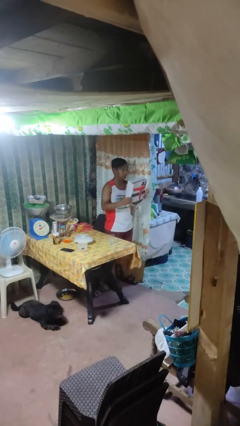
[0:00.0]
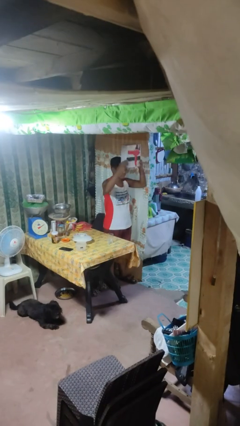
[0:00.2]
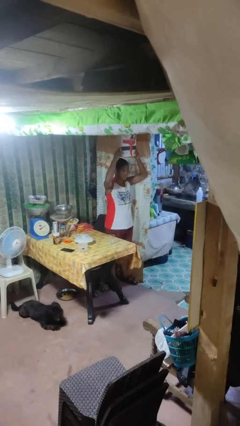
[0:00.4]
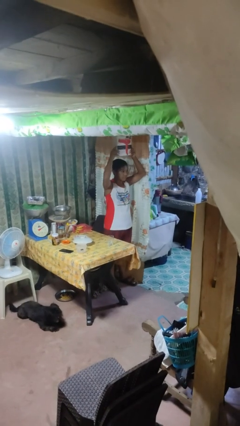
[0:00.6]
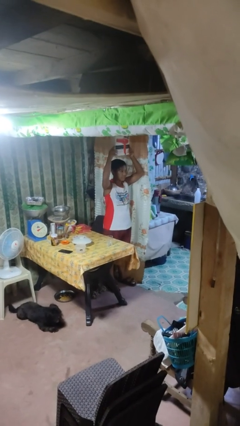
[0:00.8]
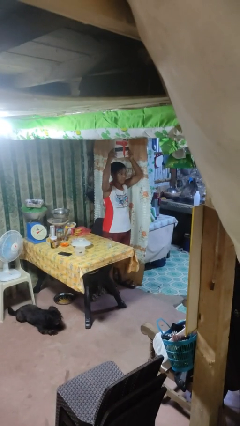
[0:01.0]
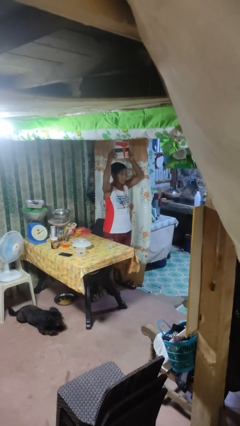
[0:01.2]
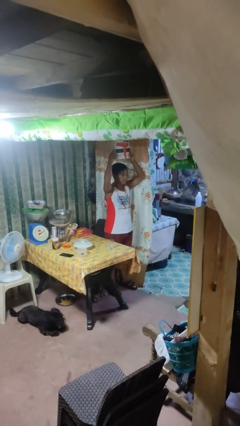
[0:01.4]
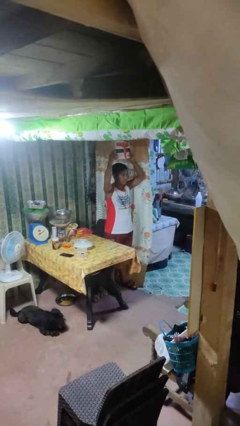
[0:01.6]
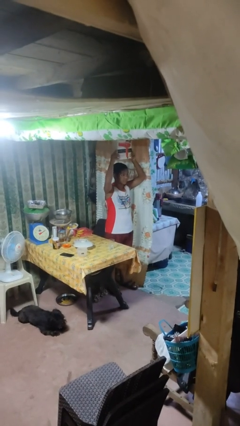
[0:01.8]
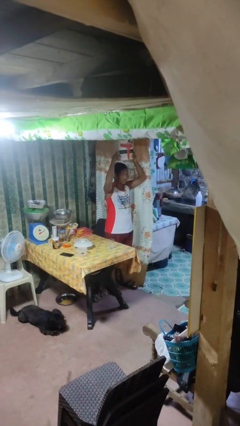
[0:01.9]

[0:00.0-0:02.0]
person holds object above head

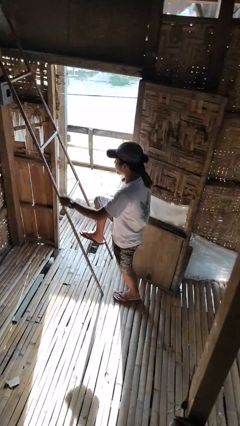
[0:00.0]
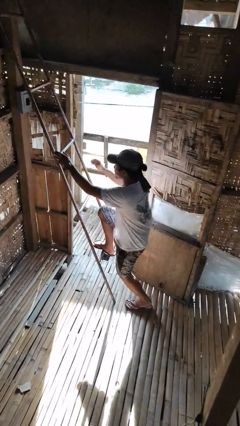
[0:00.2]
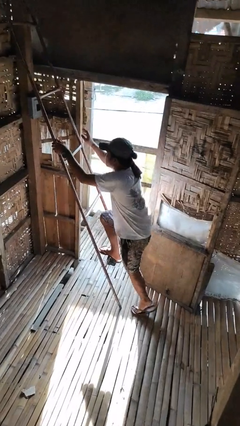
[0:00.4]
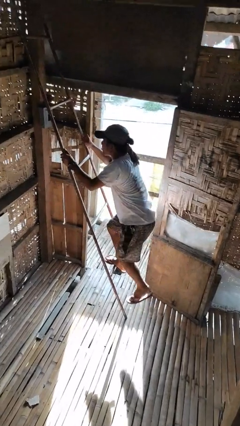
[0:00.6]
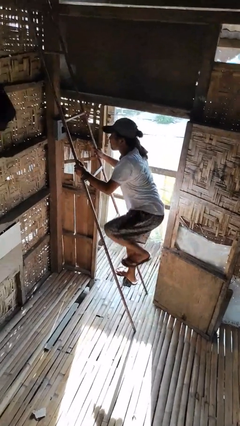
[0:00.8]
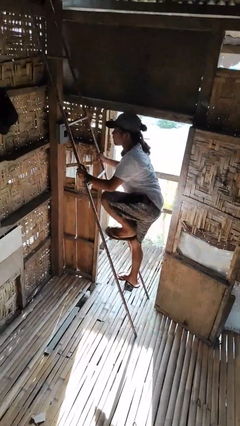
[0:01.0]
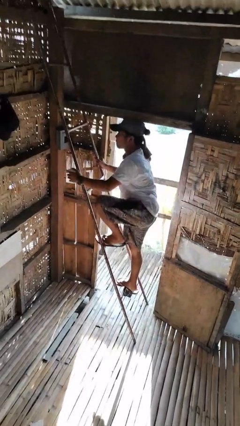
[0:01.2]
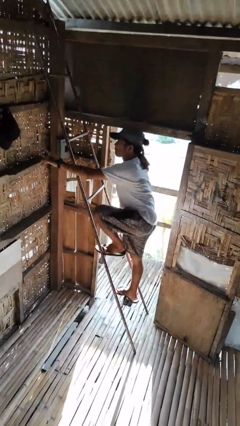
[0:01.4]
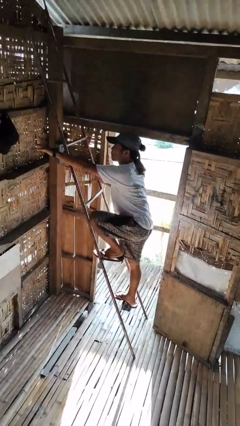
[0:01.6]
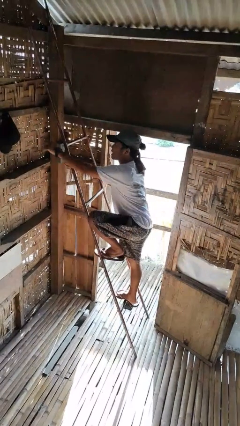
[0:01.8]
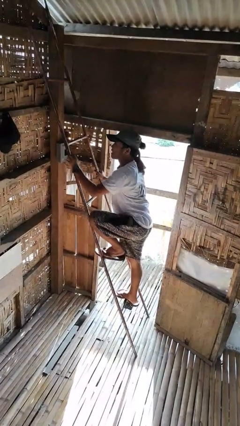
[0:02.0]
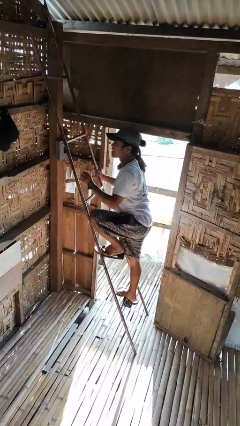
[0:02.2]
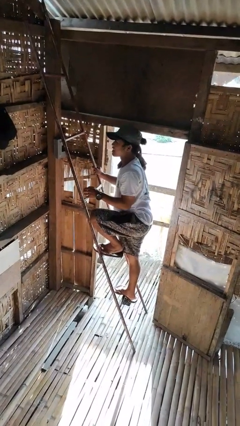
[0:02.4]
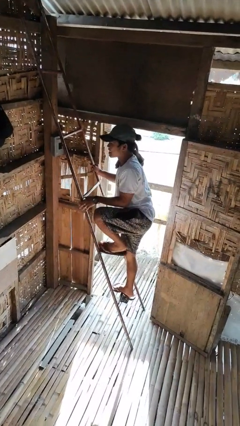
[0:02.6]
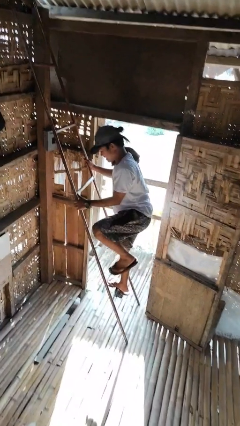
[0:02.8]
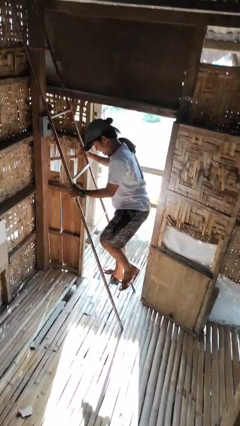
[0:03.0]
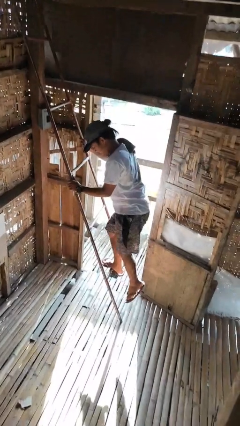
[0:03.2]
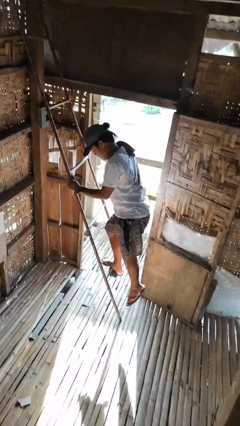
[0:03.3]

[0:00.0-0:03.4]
person climbs up ladder

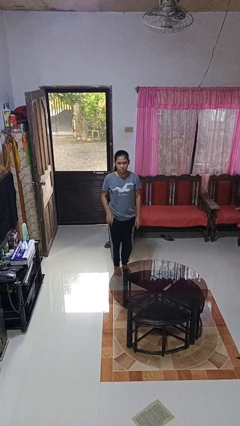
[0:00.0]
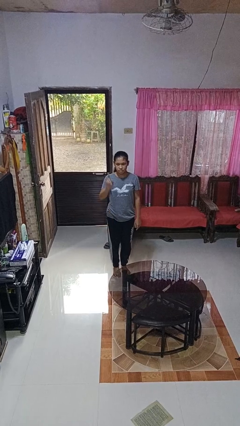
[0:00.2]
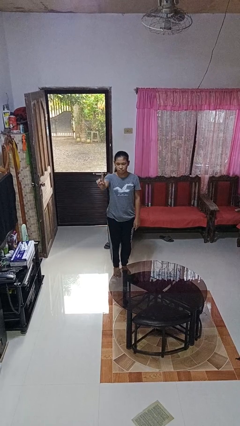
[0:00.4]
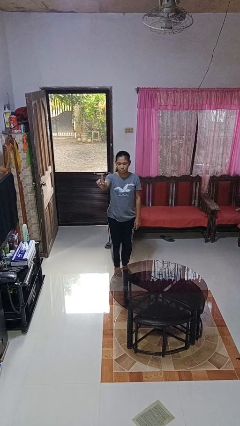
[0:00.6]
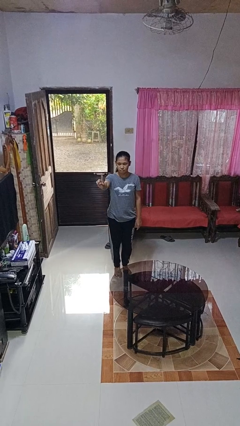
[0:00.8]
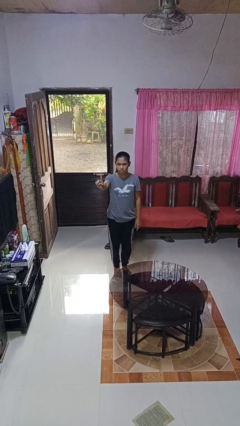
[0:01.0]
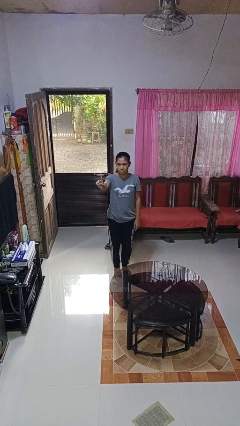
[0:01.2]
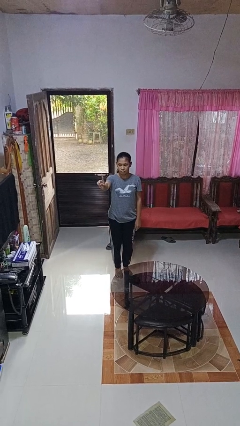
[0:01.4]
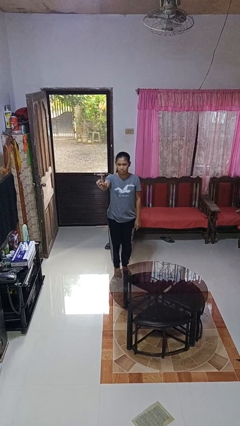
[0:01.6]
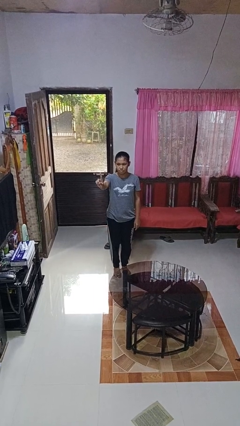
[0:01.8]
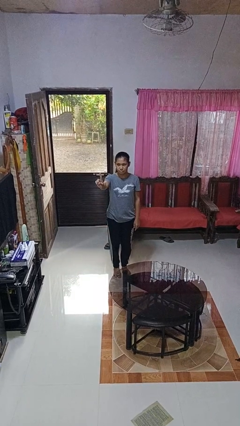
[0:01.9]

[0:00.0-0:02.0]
person gestures number one

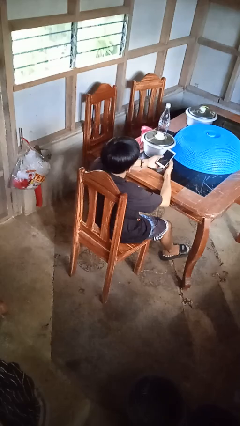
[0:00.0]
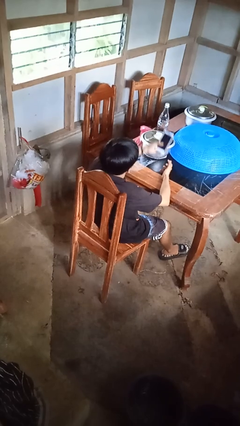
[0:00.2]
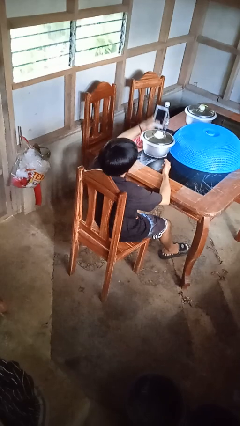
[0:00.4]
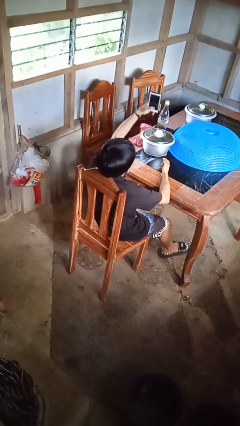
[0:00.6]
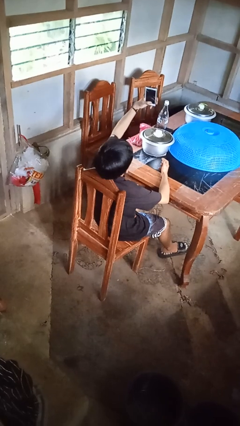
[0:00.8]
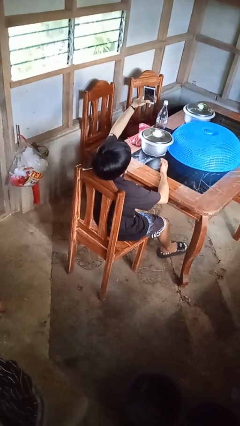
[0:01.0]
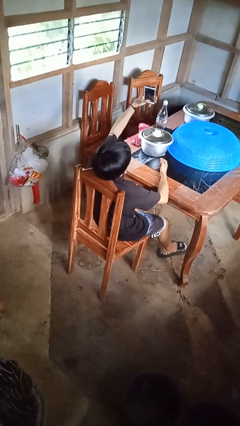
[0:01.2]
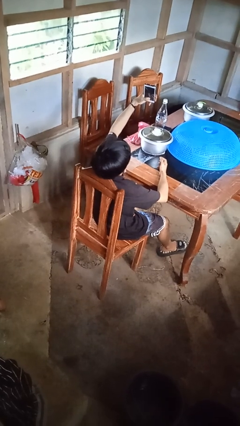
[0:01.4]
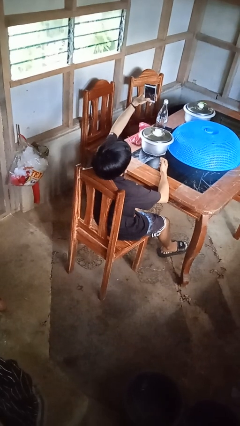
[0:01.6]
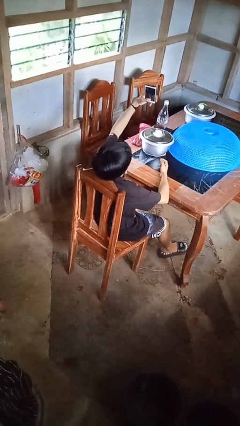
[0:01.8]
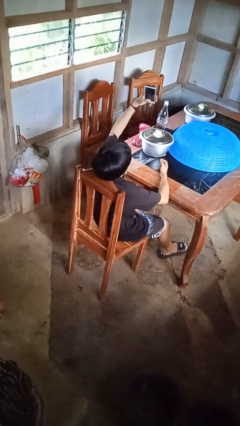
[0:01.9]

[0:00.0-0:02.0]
person takes selfie

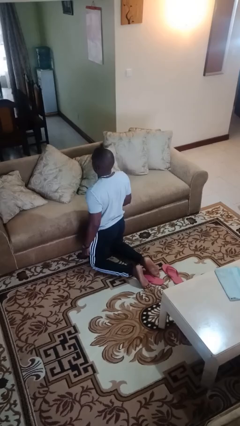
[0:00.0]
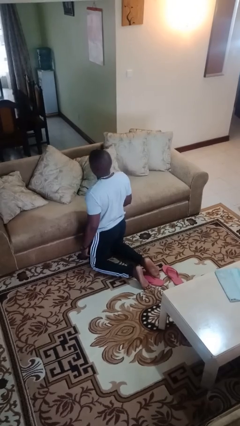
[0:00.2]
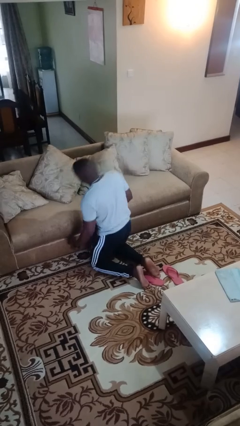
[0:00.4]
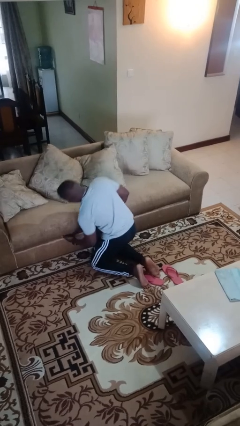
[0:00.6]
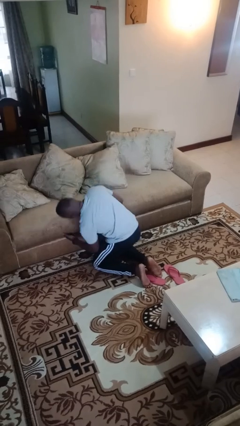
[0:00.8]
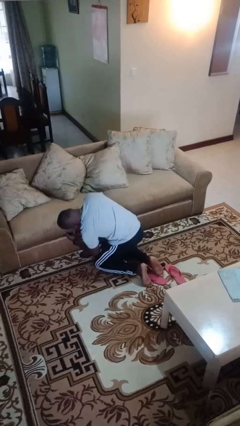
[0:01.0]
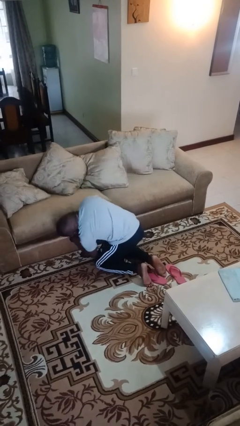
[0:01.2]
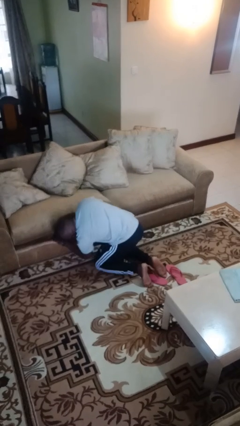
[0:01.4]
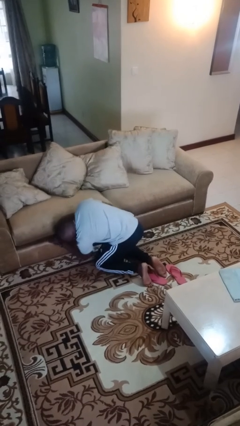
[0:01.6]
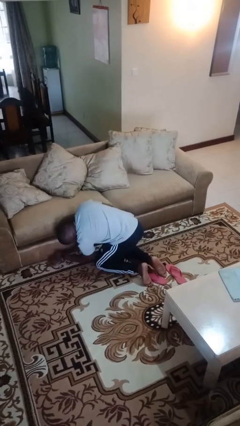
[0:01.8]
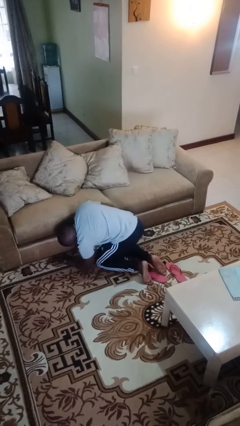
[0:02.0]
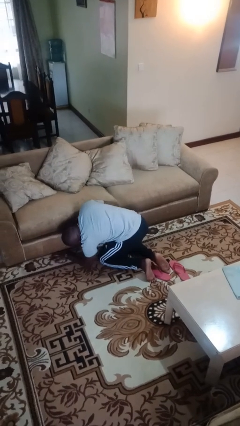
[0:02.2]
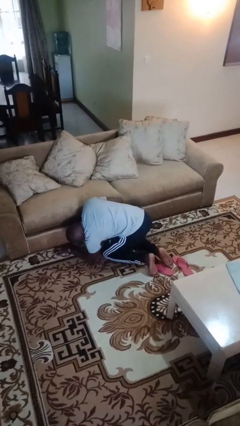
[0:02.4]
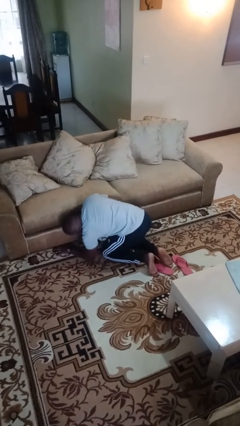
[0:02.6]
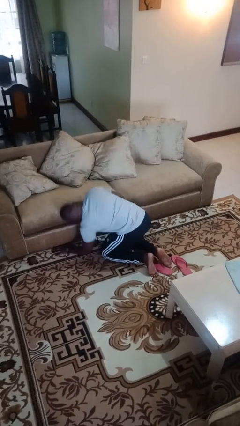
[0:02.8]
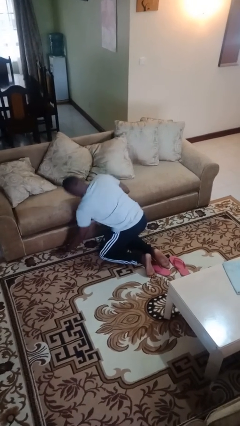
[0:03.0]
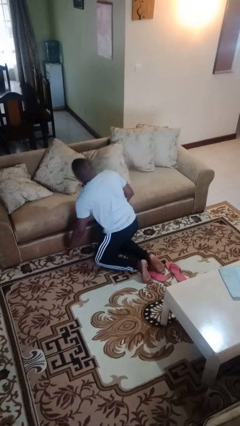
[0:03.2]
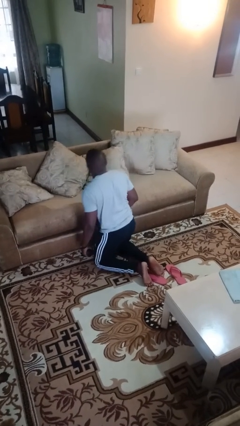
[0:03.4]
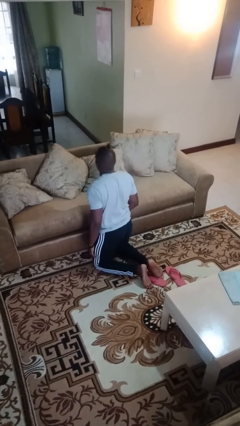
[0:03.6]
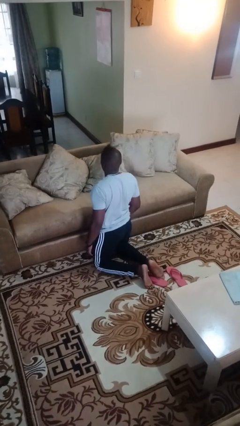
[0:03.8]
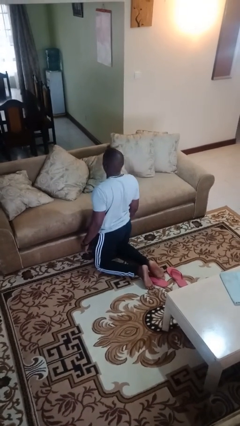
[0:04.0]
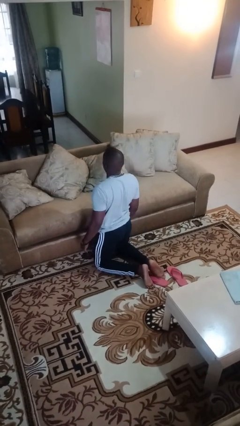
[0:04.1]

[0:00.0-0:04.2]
person searches under couch

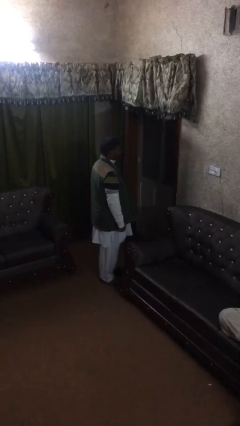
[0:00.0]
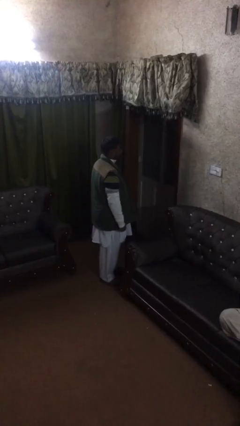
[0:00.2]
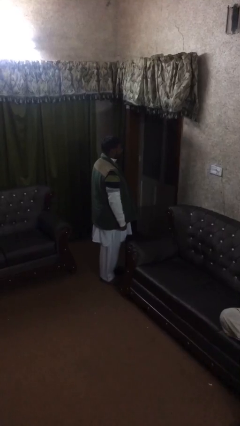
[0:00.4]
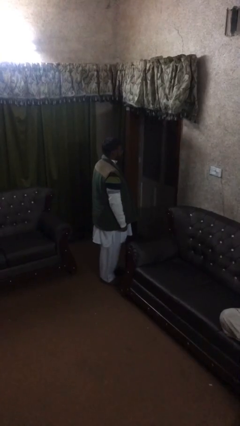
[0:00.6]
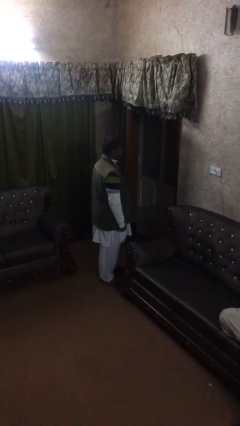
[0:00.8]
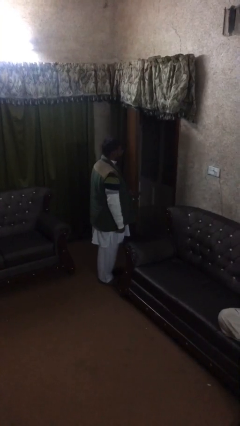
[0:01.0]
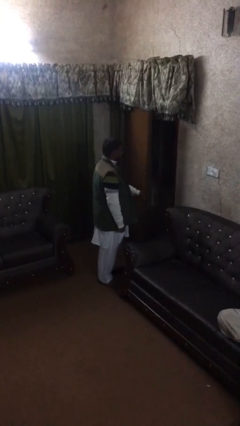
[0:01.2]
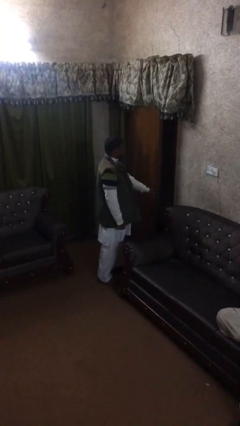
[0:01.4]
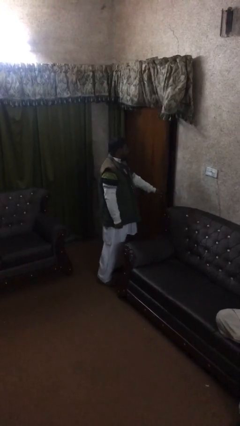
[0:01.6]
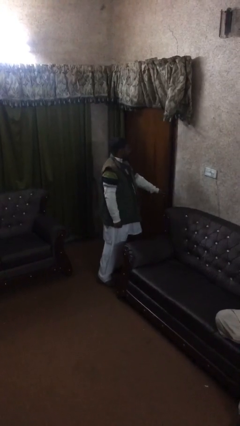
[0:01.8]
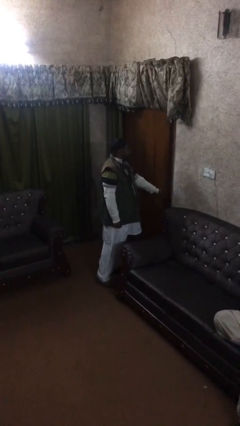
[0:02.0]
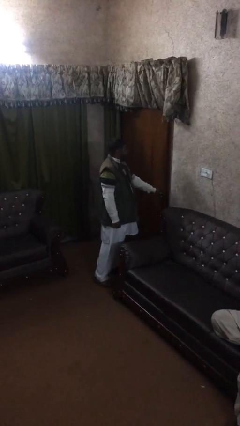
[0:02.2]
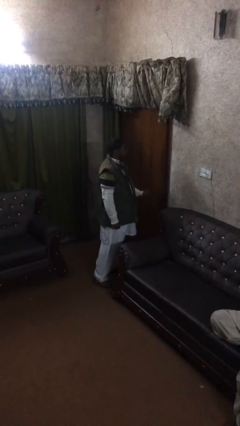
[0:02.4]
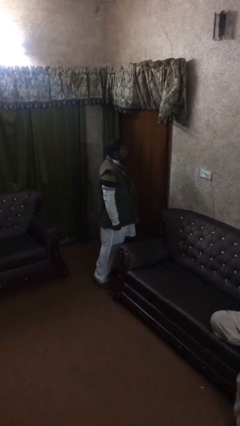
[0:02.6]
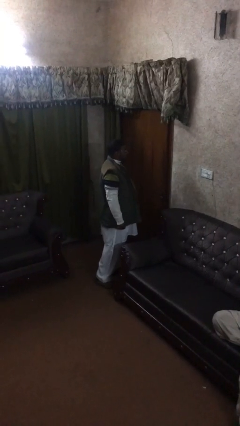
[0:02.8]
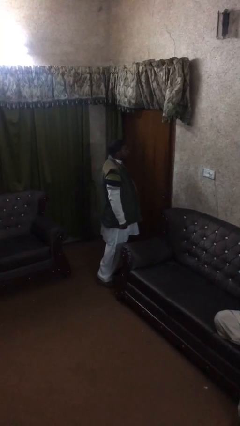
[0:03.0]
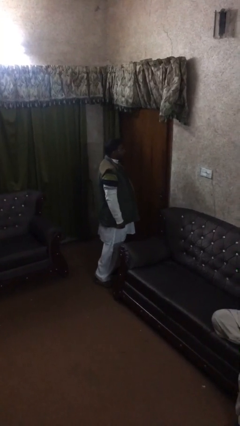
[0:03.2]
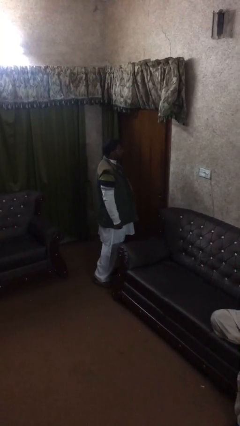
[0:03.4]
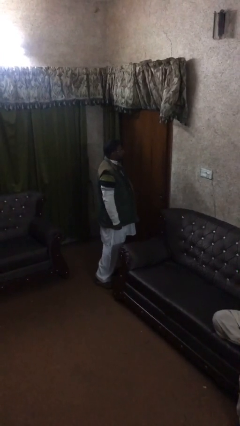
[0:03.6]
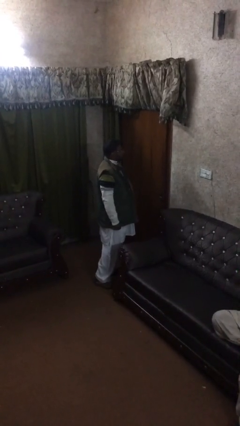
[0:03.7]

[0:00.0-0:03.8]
person closes facility door
